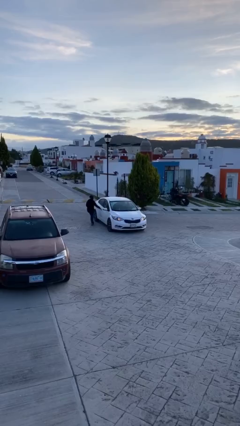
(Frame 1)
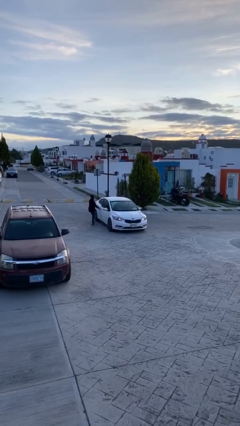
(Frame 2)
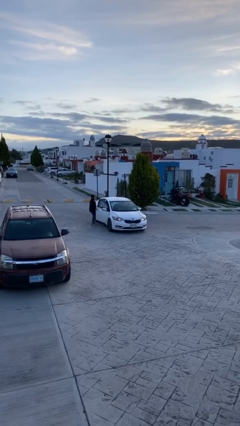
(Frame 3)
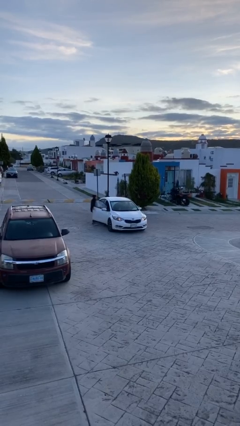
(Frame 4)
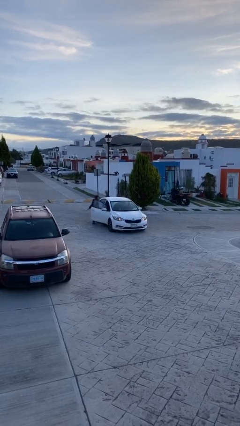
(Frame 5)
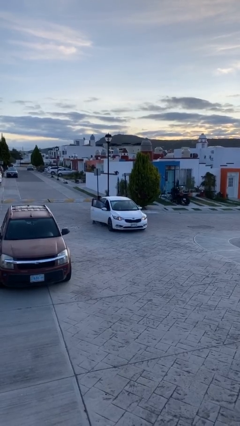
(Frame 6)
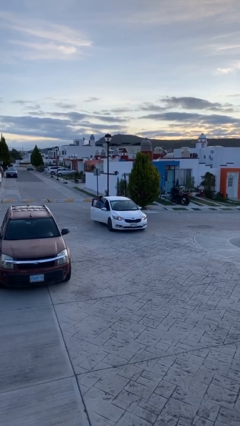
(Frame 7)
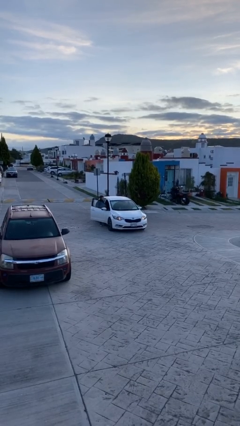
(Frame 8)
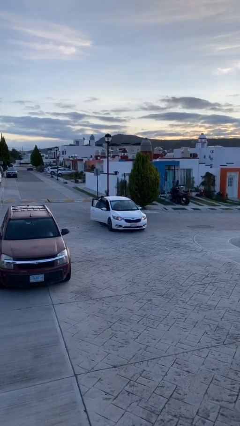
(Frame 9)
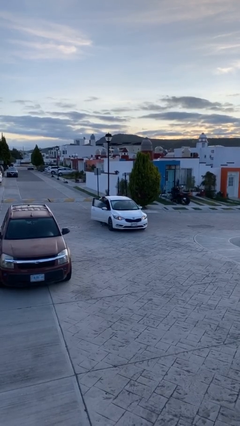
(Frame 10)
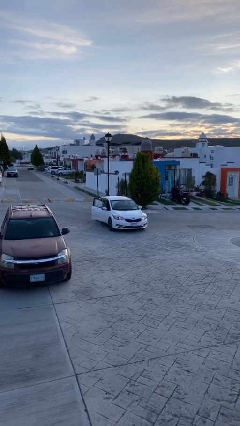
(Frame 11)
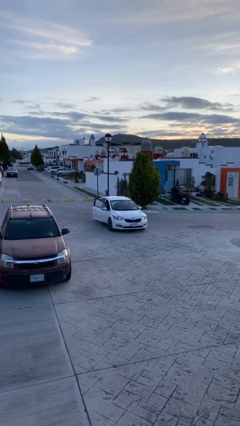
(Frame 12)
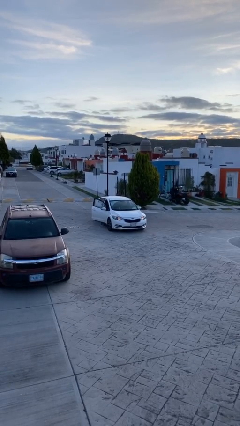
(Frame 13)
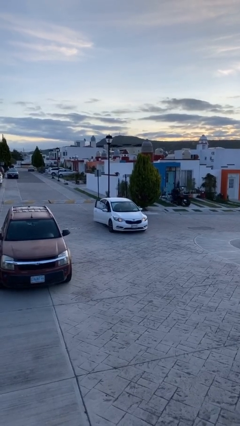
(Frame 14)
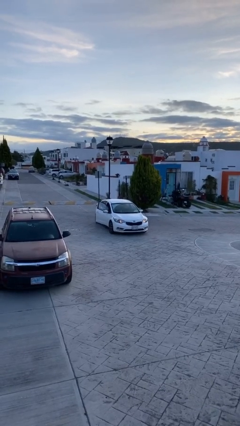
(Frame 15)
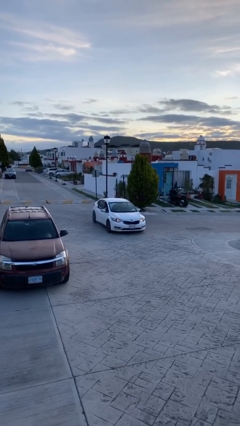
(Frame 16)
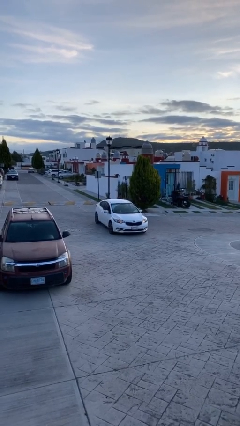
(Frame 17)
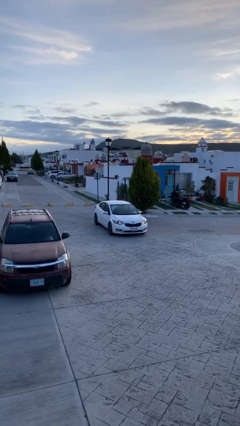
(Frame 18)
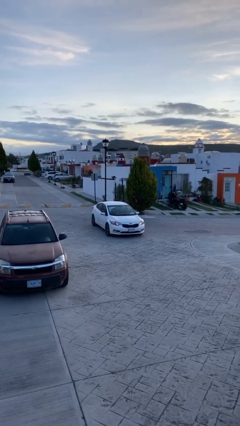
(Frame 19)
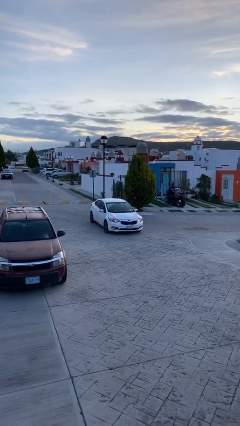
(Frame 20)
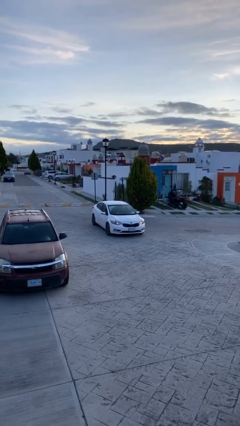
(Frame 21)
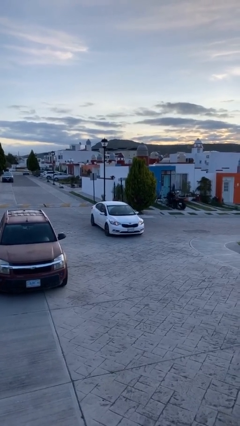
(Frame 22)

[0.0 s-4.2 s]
car picks up person

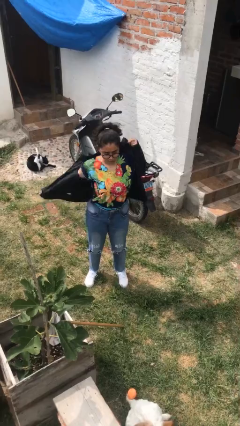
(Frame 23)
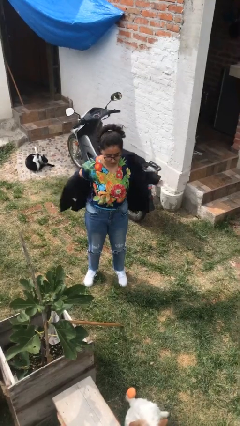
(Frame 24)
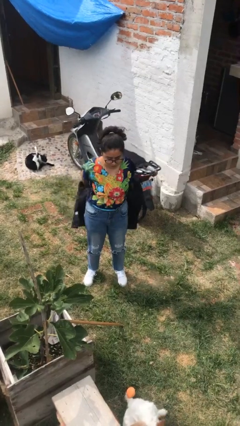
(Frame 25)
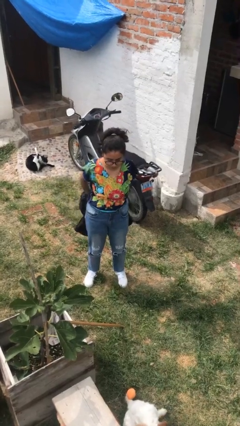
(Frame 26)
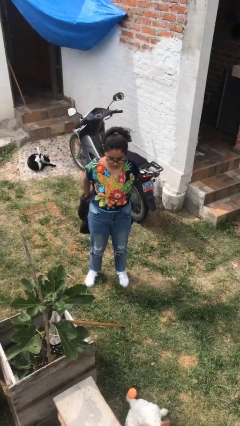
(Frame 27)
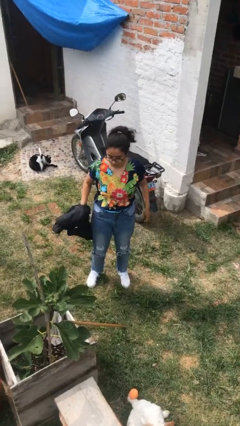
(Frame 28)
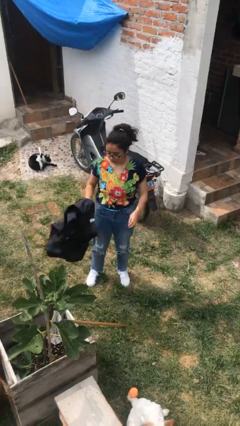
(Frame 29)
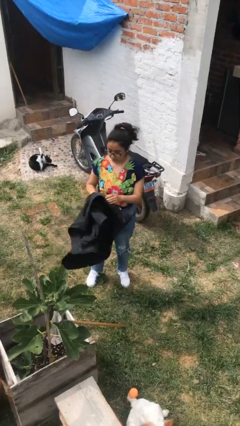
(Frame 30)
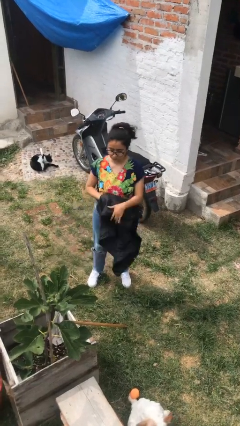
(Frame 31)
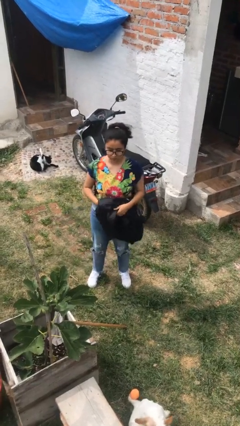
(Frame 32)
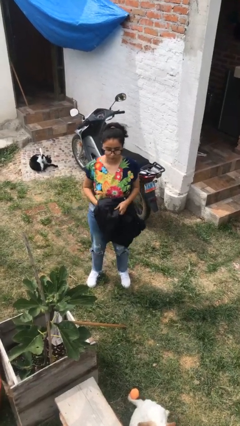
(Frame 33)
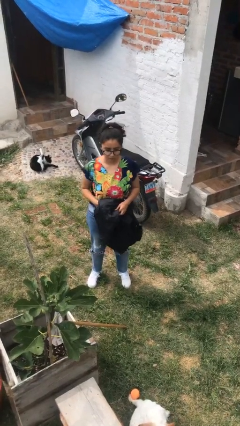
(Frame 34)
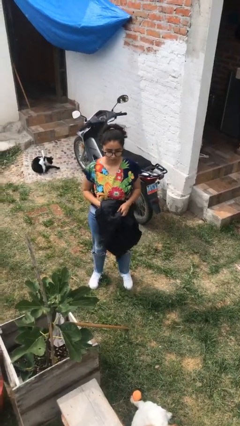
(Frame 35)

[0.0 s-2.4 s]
person takes off jacket

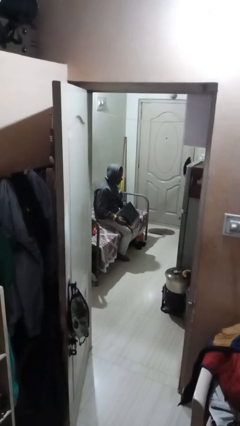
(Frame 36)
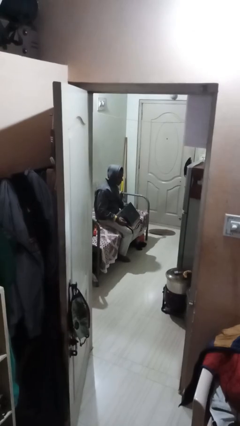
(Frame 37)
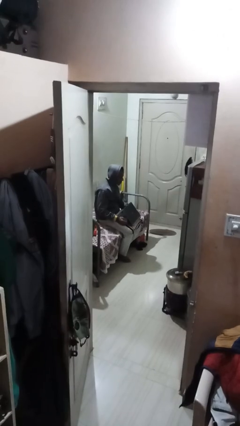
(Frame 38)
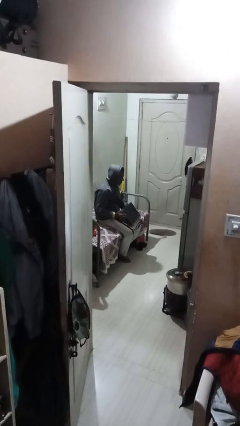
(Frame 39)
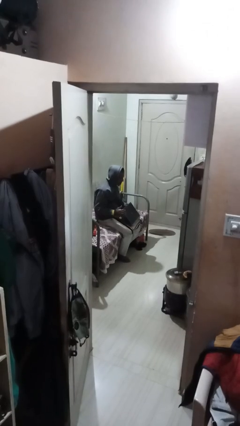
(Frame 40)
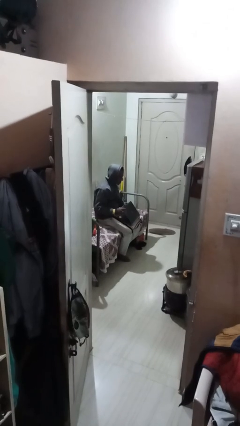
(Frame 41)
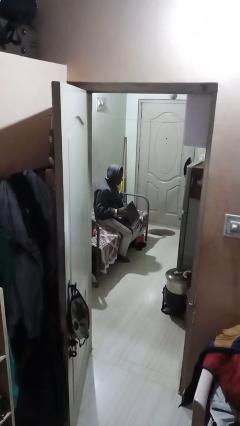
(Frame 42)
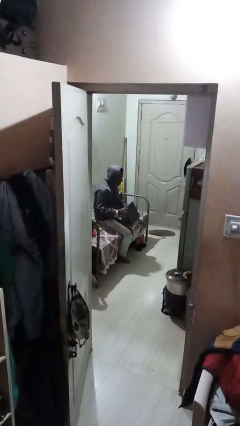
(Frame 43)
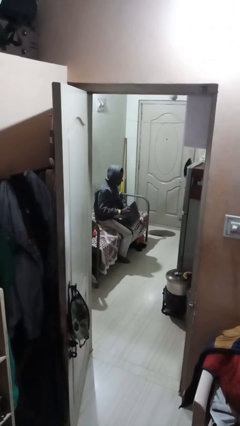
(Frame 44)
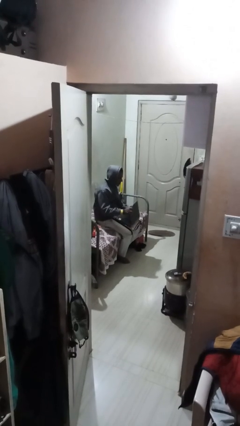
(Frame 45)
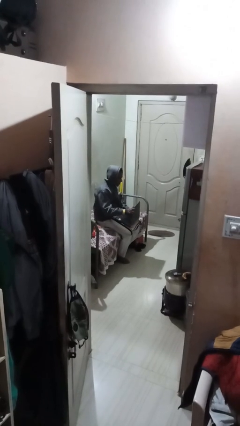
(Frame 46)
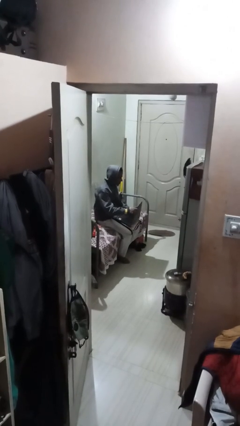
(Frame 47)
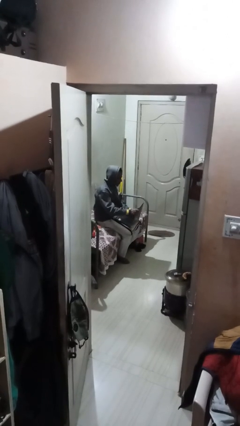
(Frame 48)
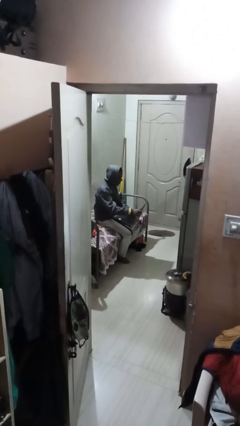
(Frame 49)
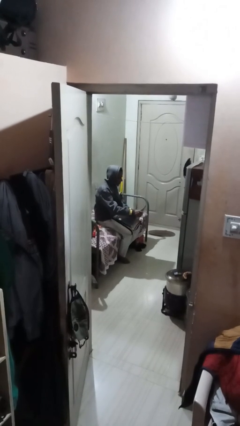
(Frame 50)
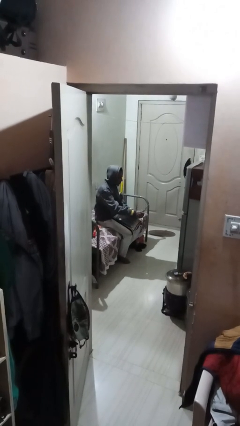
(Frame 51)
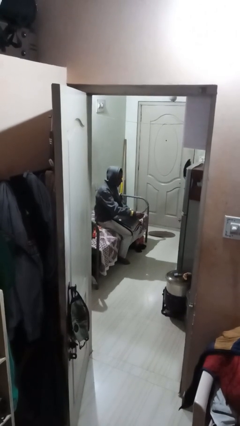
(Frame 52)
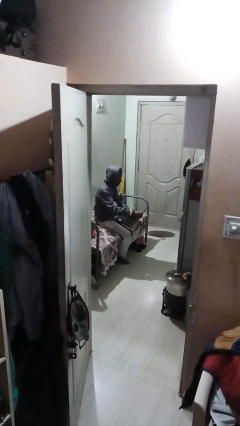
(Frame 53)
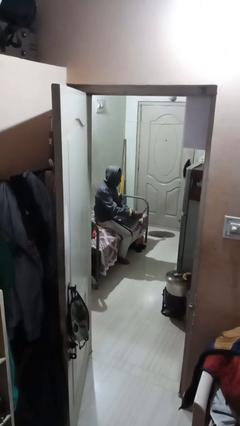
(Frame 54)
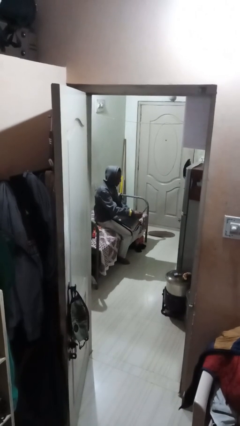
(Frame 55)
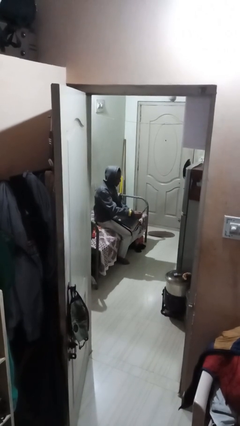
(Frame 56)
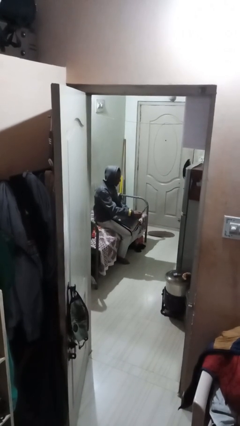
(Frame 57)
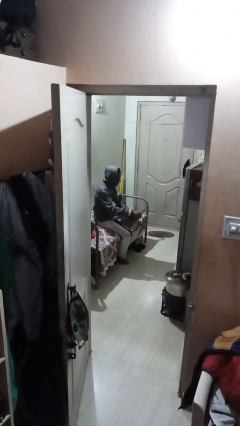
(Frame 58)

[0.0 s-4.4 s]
person interacts with laptop

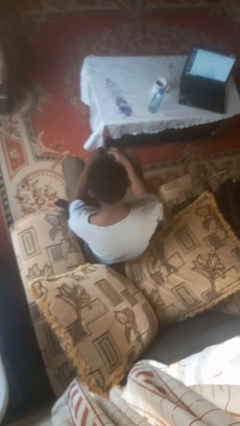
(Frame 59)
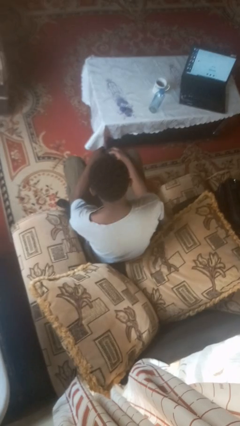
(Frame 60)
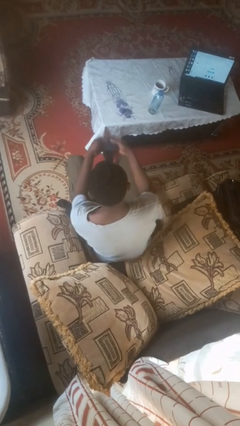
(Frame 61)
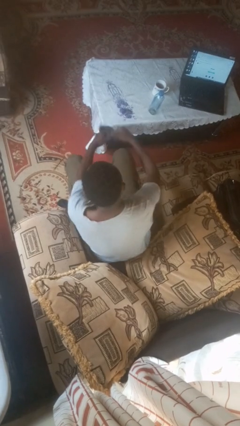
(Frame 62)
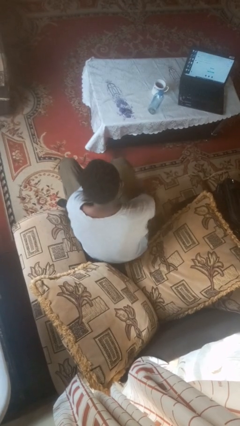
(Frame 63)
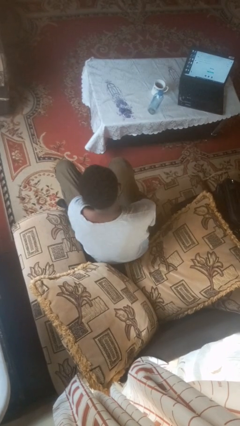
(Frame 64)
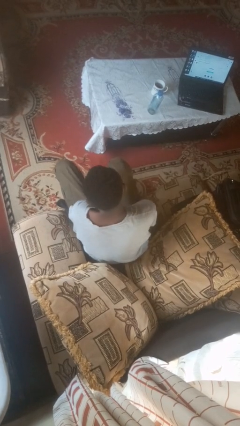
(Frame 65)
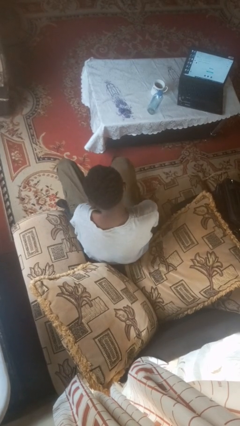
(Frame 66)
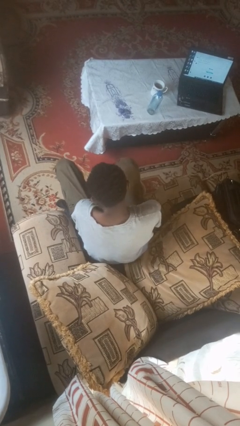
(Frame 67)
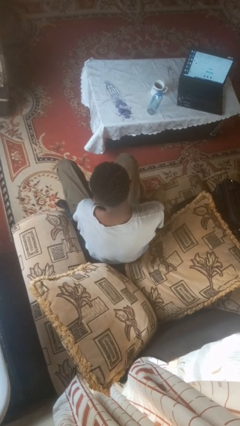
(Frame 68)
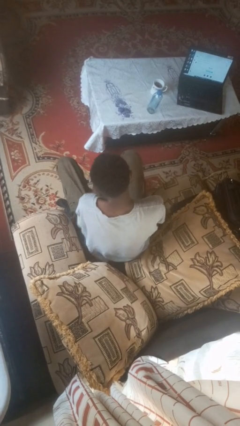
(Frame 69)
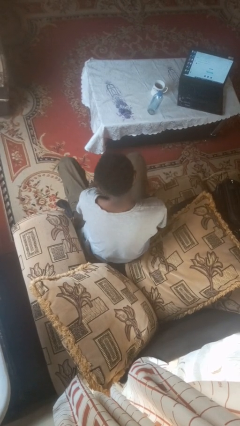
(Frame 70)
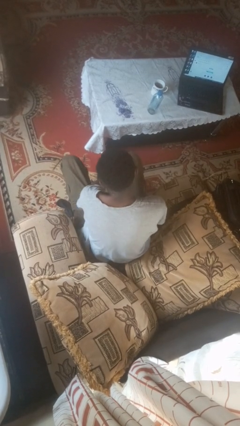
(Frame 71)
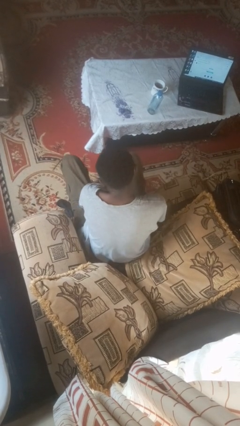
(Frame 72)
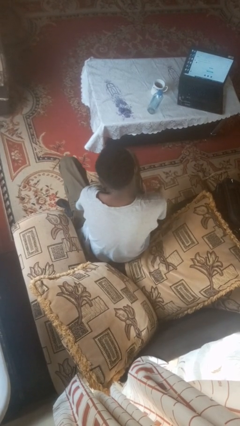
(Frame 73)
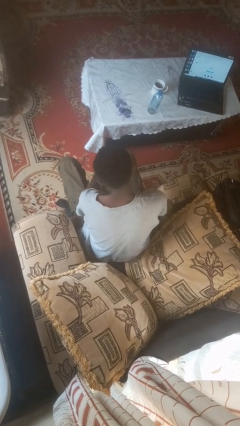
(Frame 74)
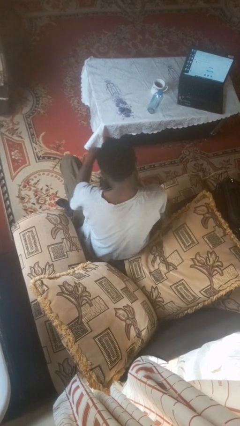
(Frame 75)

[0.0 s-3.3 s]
person puts on socks

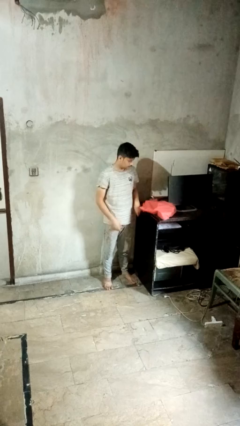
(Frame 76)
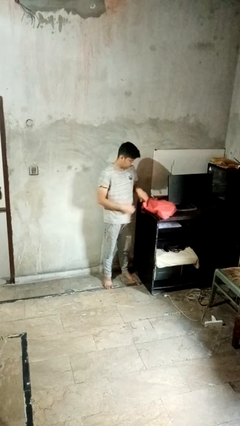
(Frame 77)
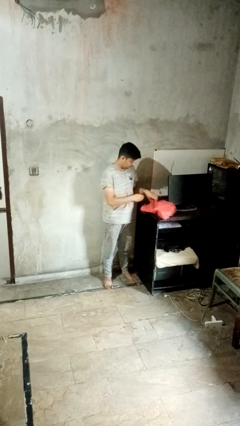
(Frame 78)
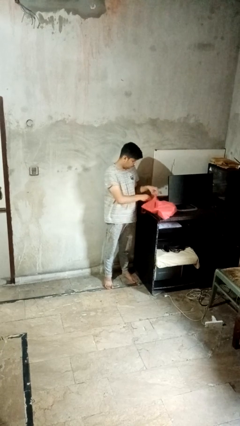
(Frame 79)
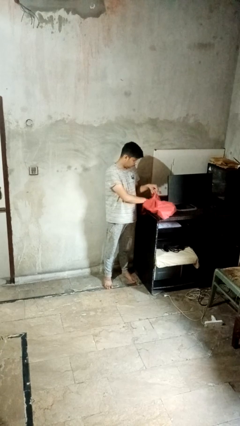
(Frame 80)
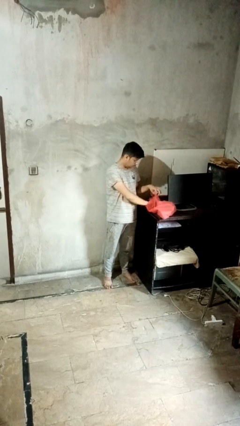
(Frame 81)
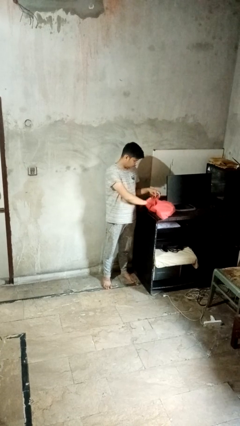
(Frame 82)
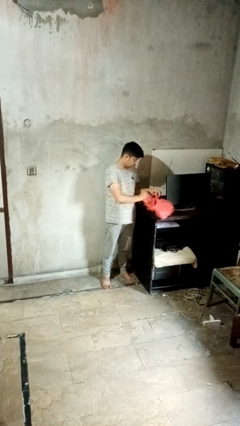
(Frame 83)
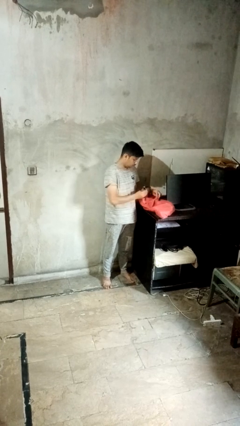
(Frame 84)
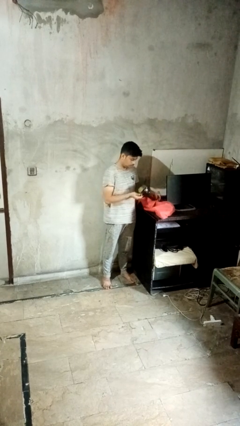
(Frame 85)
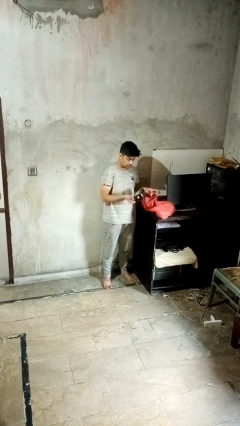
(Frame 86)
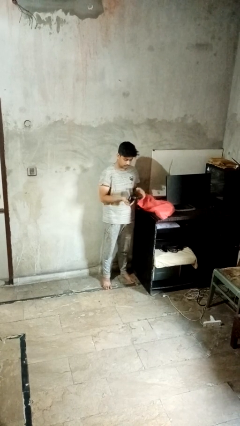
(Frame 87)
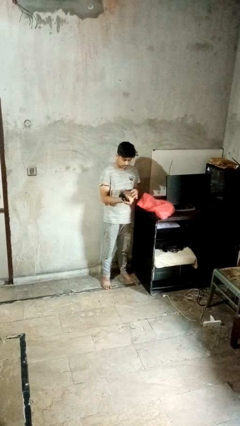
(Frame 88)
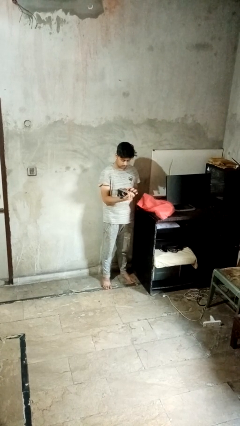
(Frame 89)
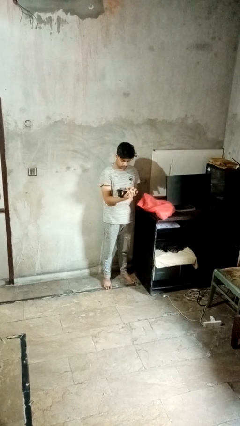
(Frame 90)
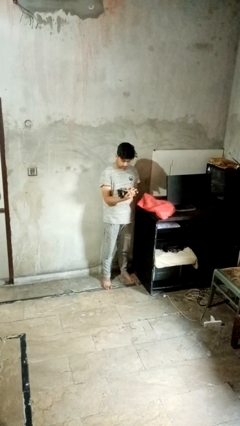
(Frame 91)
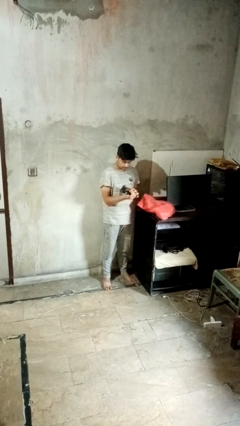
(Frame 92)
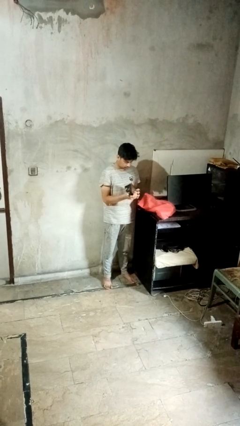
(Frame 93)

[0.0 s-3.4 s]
person takes object from bag

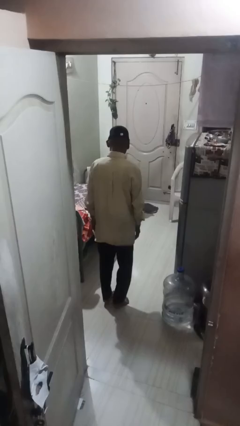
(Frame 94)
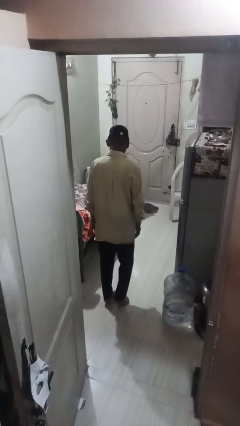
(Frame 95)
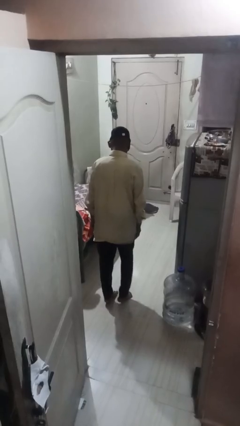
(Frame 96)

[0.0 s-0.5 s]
person walks tiptoe
